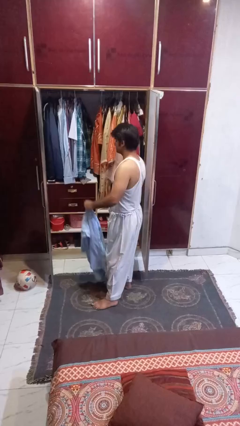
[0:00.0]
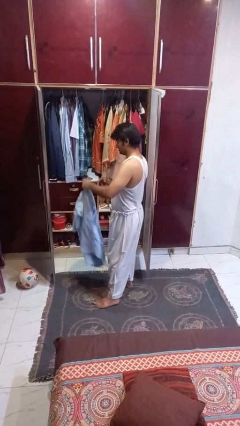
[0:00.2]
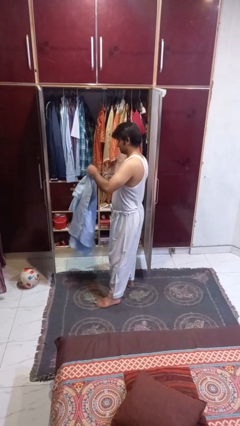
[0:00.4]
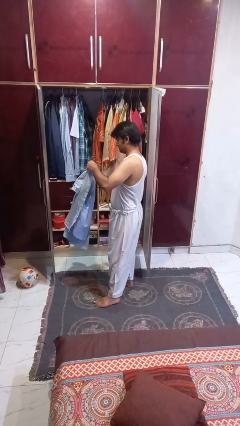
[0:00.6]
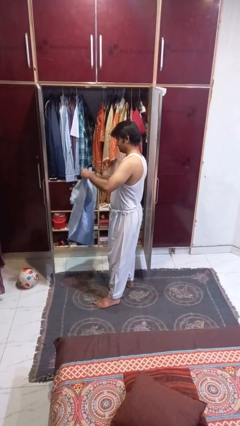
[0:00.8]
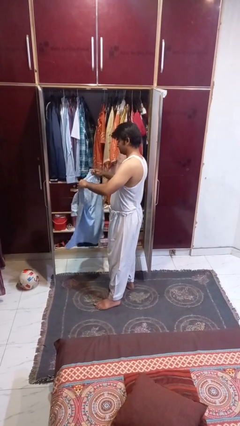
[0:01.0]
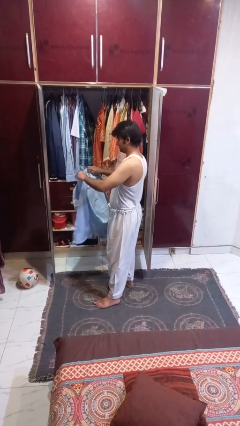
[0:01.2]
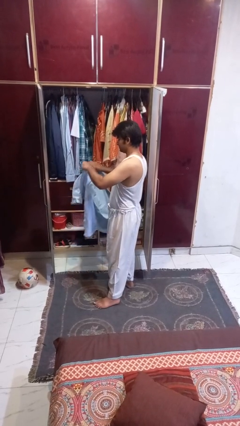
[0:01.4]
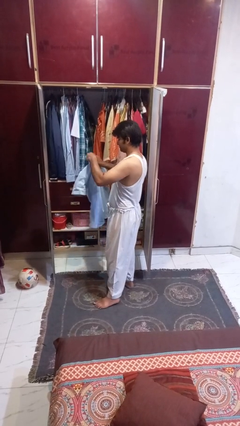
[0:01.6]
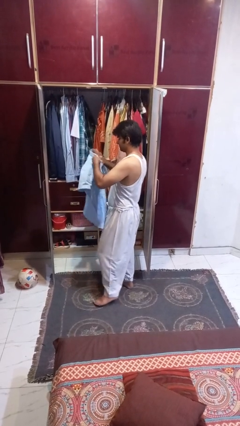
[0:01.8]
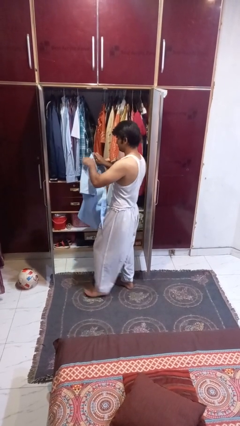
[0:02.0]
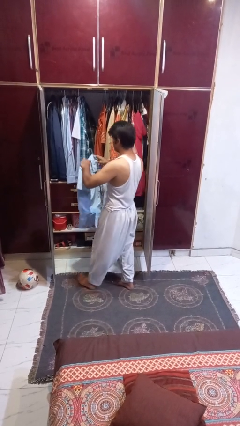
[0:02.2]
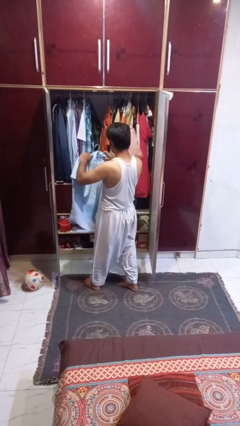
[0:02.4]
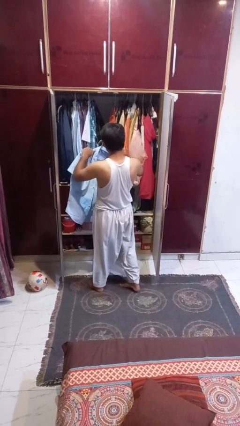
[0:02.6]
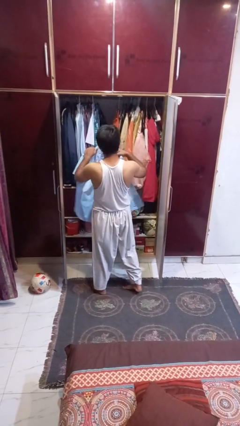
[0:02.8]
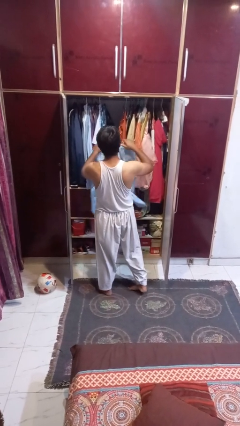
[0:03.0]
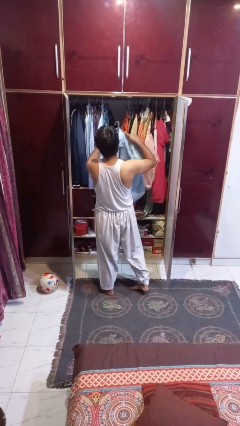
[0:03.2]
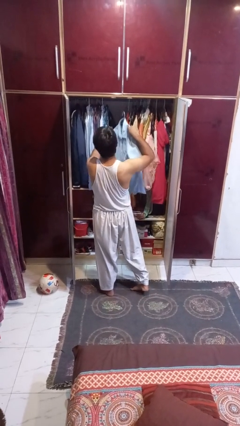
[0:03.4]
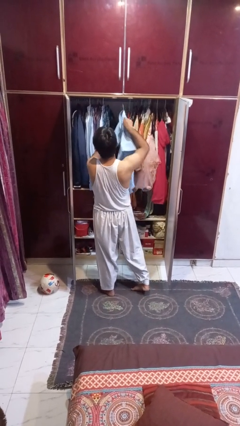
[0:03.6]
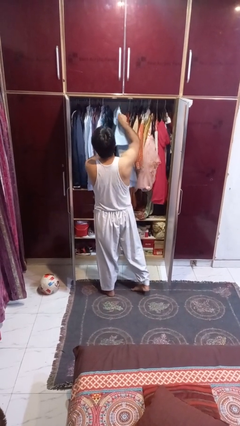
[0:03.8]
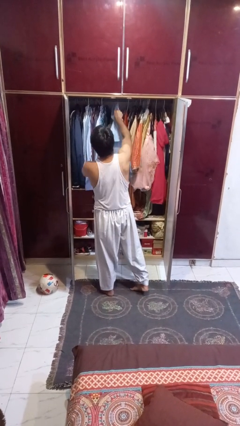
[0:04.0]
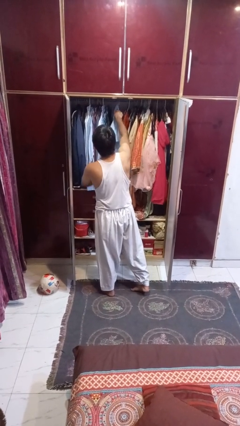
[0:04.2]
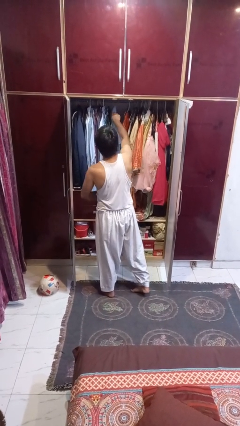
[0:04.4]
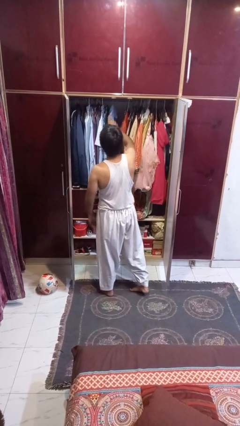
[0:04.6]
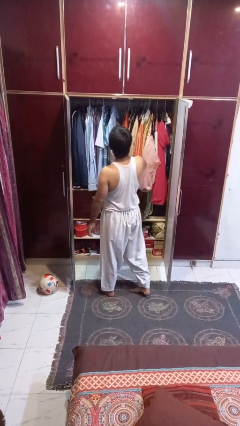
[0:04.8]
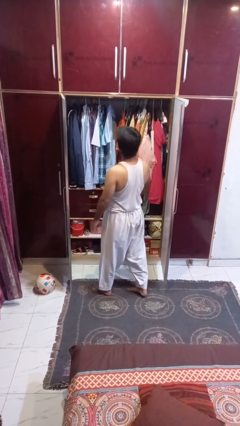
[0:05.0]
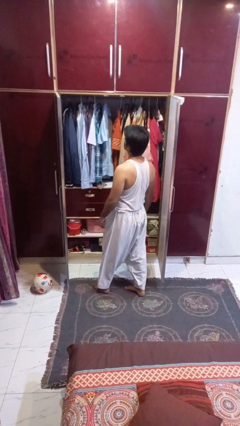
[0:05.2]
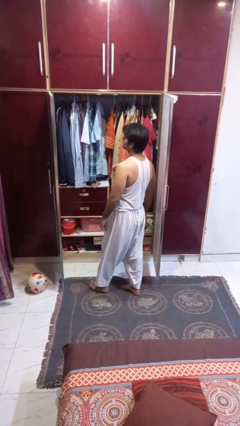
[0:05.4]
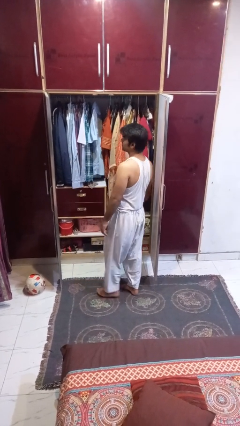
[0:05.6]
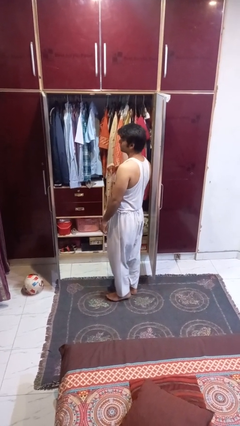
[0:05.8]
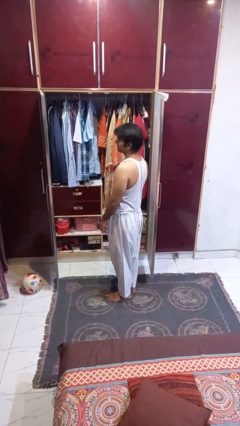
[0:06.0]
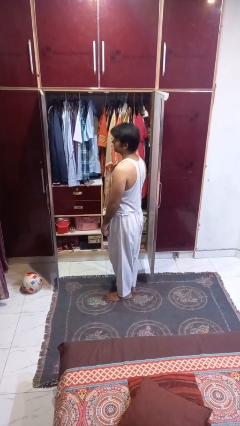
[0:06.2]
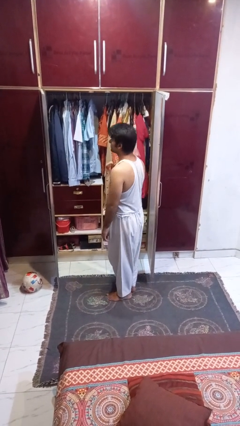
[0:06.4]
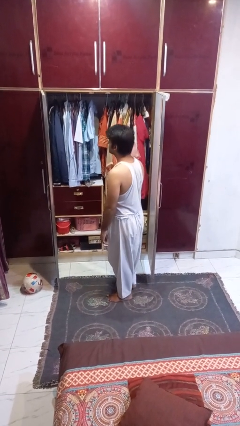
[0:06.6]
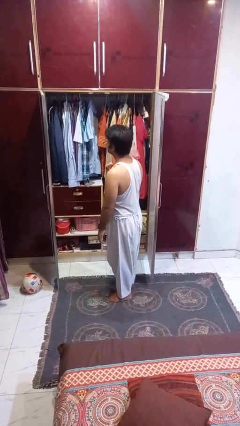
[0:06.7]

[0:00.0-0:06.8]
person puts clothes into closet

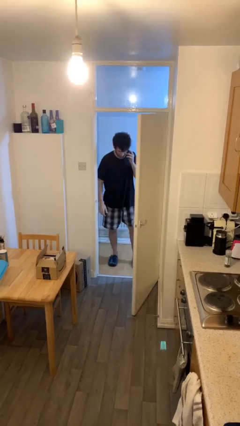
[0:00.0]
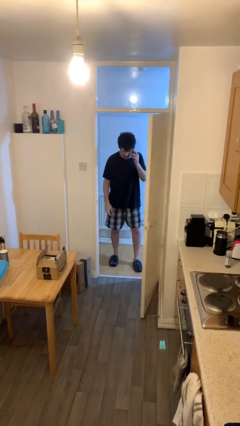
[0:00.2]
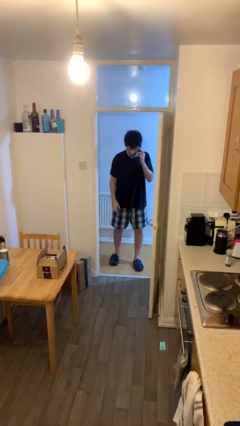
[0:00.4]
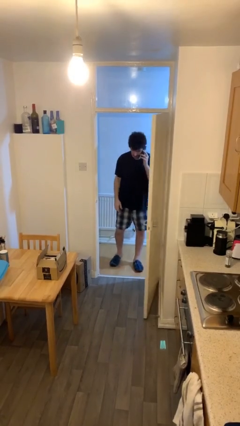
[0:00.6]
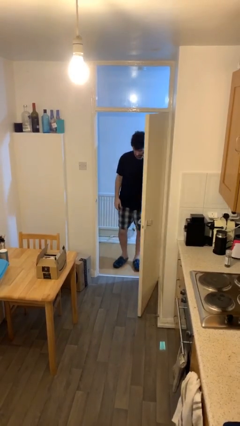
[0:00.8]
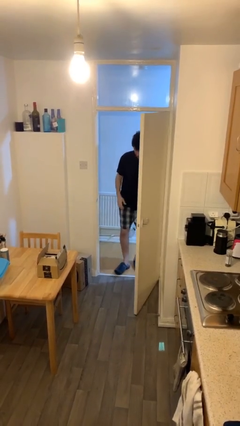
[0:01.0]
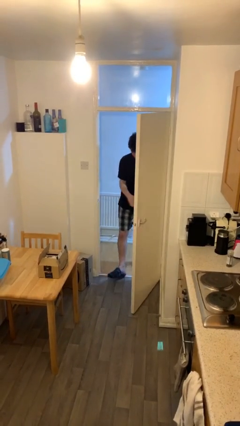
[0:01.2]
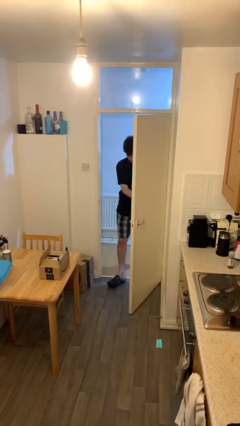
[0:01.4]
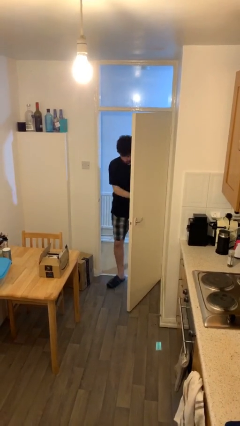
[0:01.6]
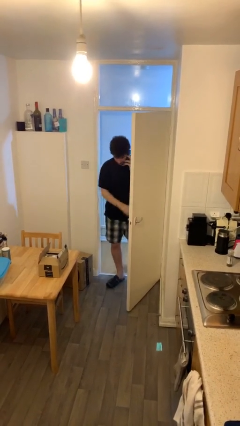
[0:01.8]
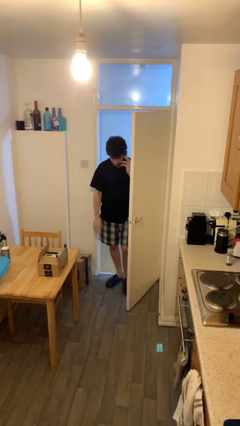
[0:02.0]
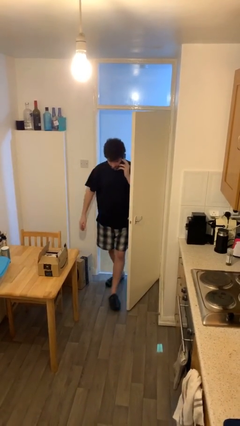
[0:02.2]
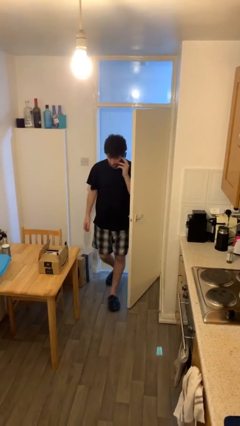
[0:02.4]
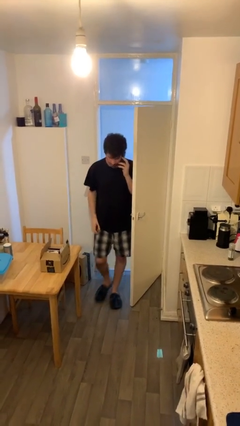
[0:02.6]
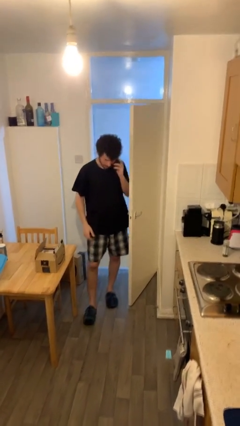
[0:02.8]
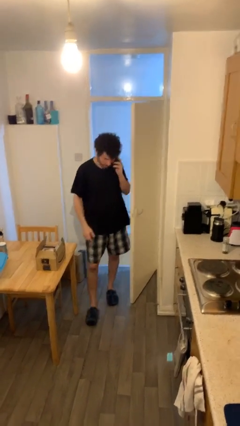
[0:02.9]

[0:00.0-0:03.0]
person enters scene through structure

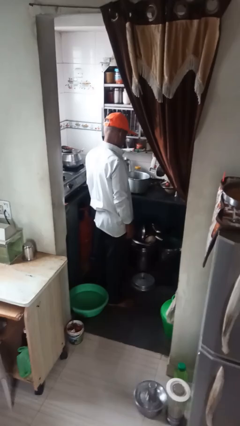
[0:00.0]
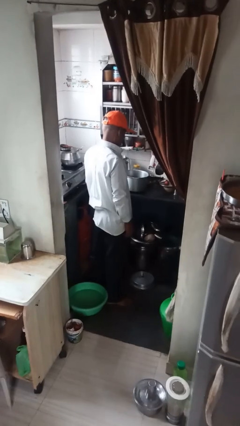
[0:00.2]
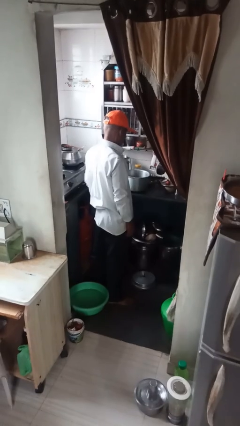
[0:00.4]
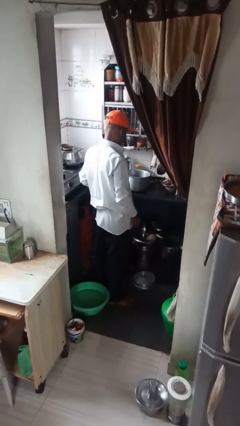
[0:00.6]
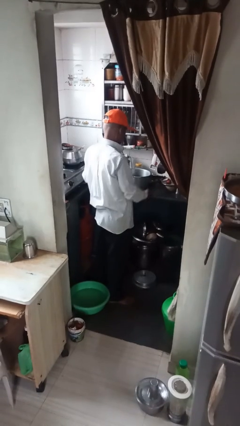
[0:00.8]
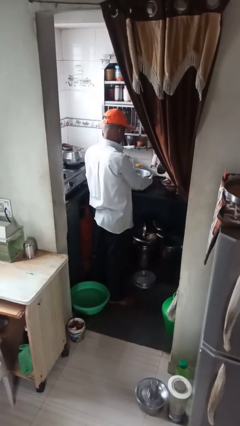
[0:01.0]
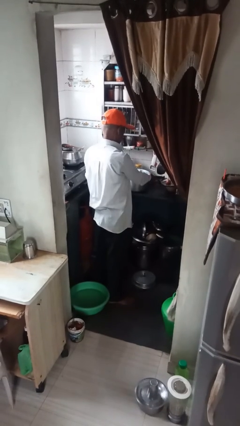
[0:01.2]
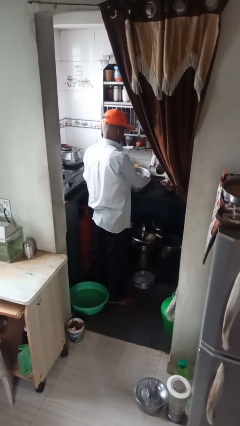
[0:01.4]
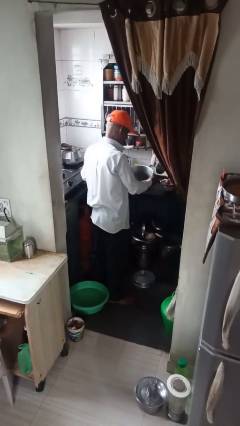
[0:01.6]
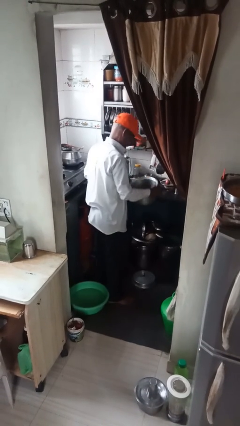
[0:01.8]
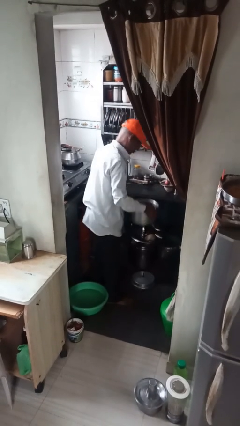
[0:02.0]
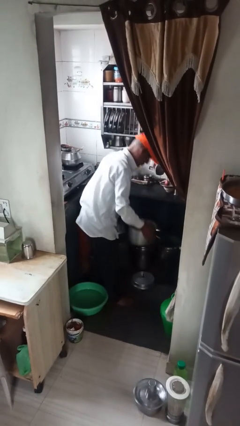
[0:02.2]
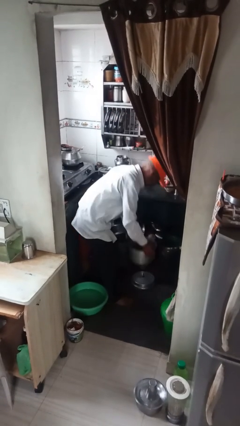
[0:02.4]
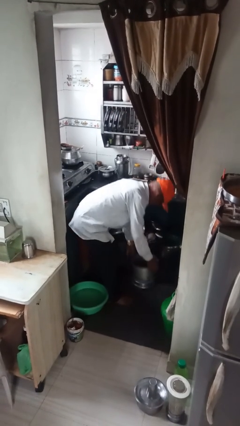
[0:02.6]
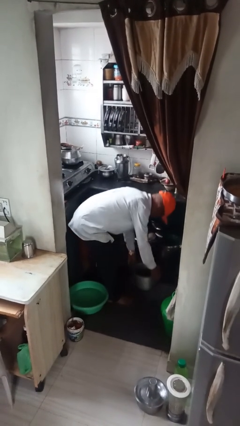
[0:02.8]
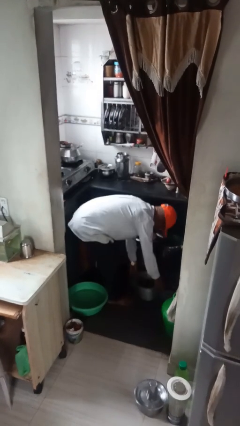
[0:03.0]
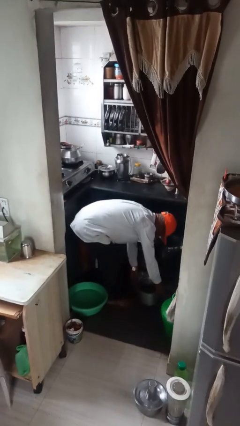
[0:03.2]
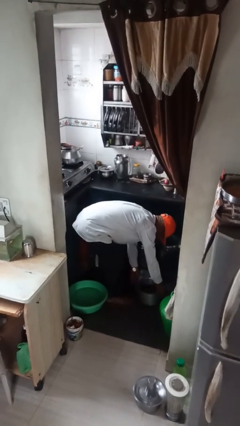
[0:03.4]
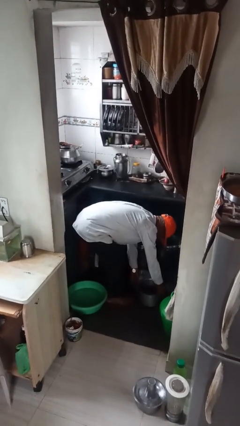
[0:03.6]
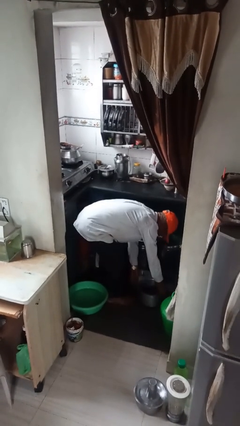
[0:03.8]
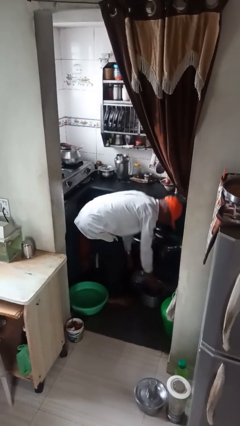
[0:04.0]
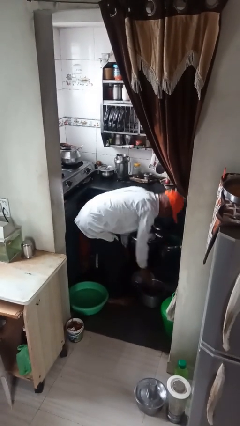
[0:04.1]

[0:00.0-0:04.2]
person puts down object on countertop

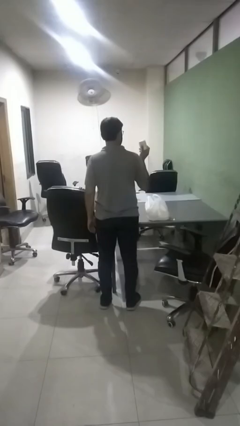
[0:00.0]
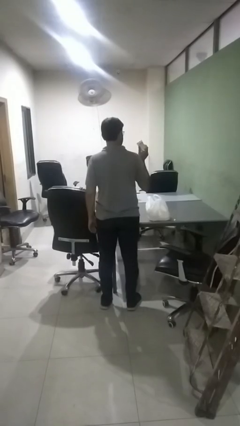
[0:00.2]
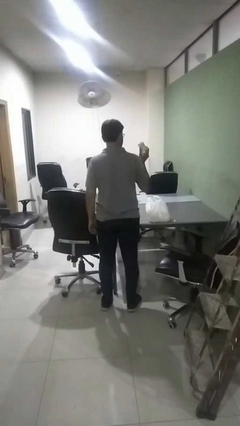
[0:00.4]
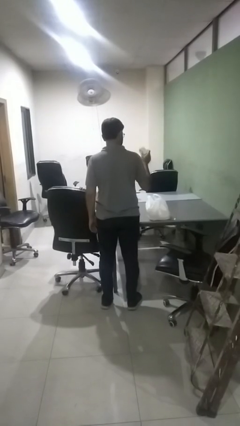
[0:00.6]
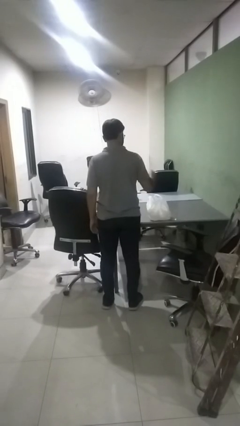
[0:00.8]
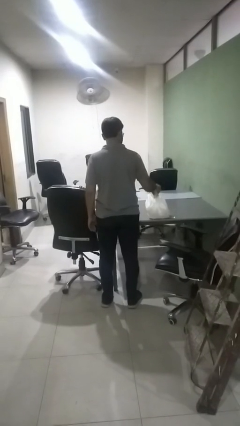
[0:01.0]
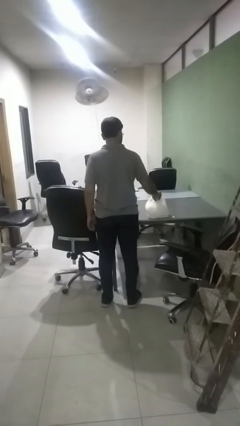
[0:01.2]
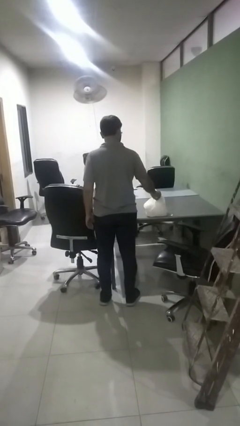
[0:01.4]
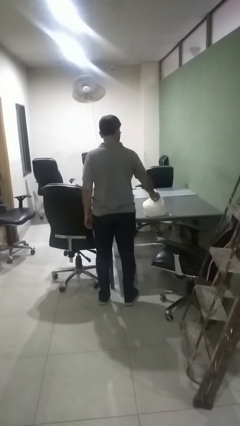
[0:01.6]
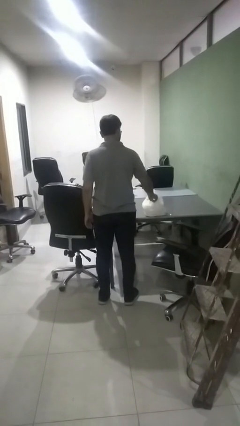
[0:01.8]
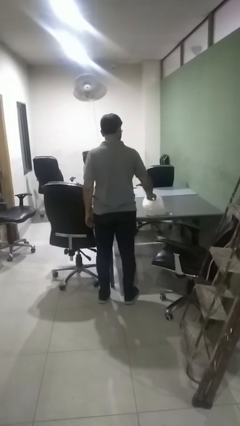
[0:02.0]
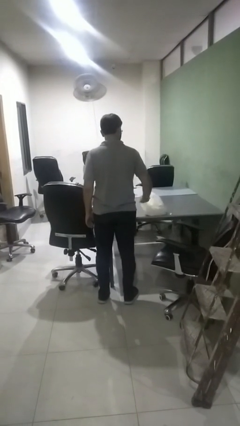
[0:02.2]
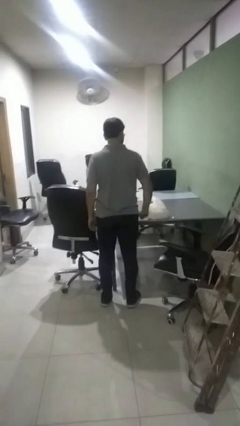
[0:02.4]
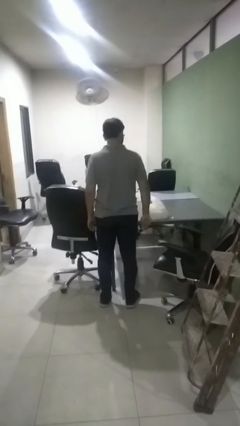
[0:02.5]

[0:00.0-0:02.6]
person puts object into bag

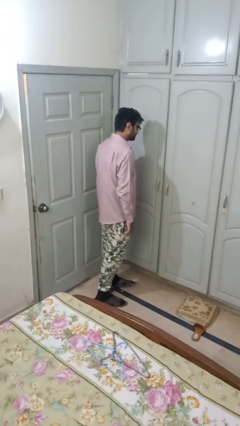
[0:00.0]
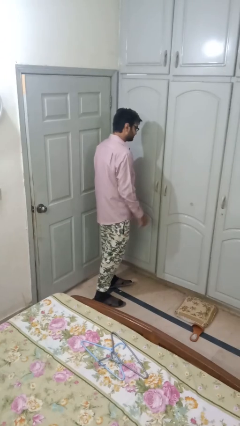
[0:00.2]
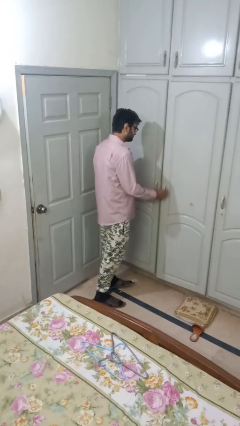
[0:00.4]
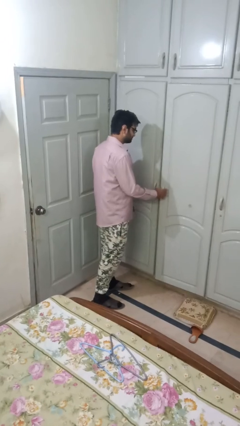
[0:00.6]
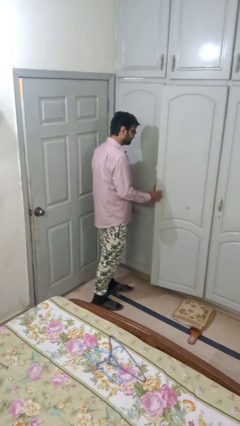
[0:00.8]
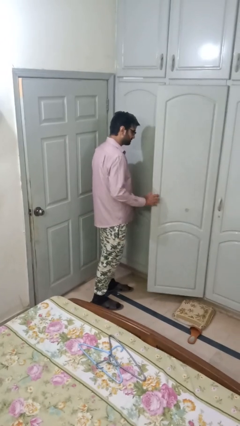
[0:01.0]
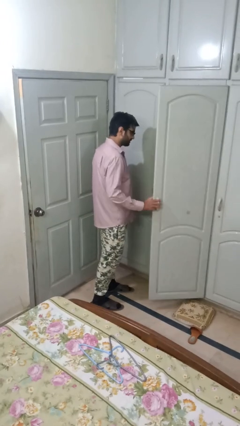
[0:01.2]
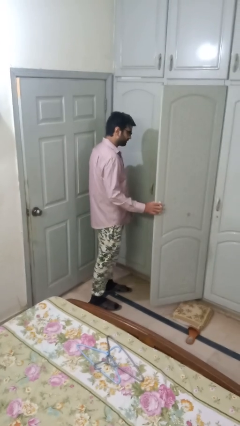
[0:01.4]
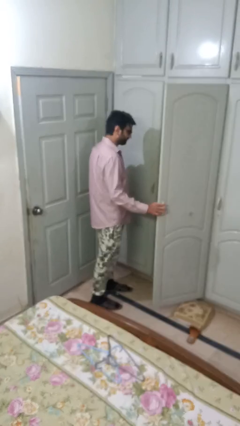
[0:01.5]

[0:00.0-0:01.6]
person opens closet door
